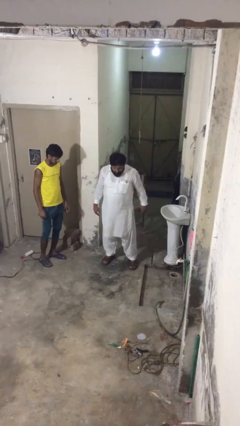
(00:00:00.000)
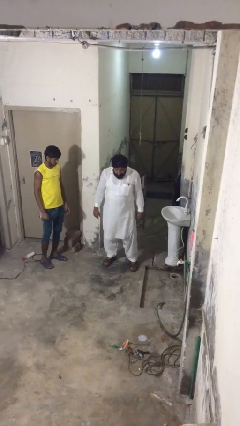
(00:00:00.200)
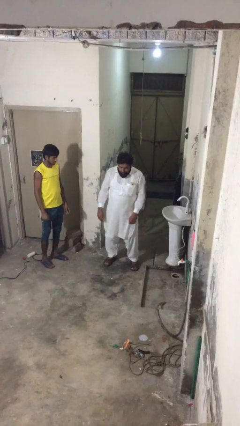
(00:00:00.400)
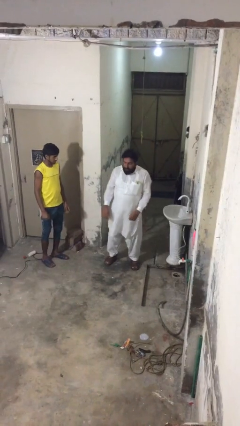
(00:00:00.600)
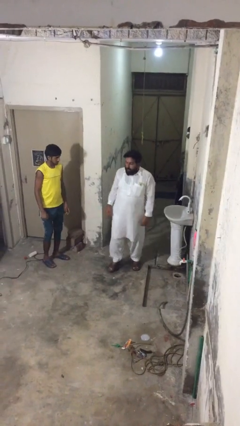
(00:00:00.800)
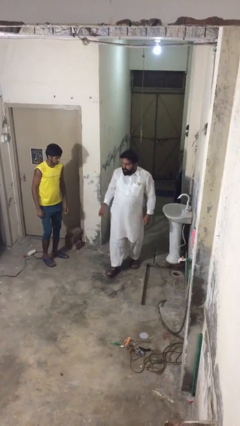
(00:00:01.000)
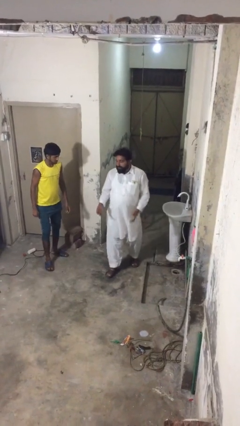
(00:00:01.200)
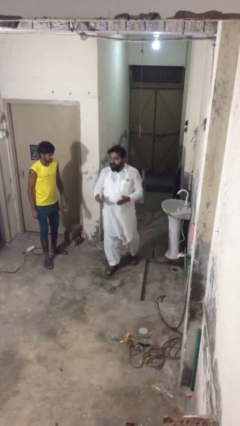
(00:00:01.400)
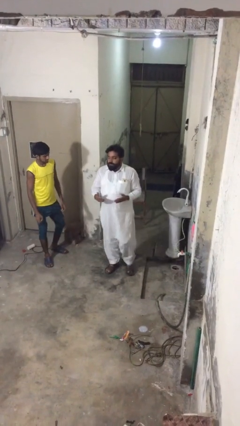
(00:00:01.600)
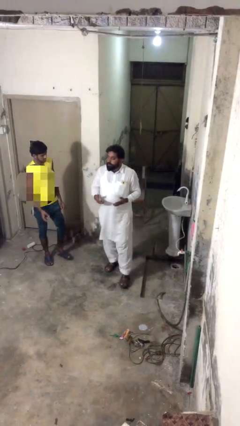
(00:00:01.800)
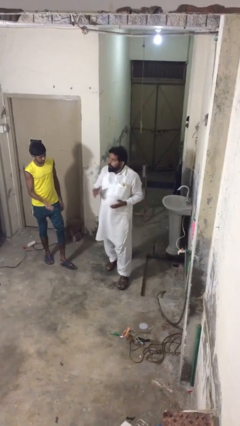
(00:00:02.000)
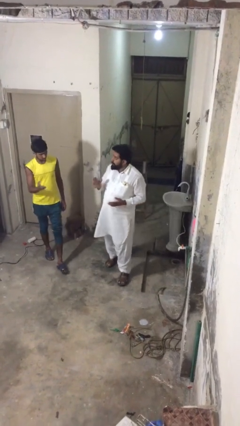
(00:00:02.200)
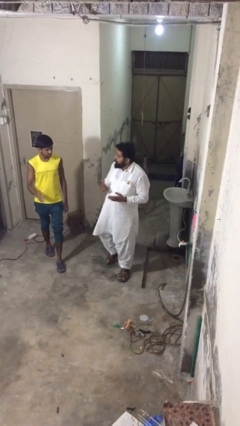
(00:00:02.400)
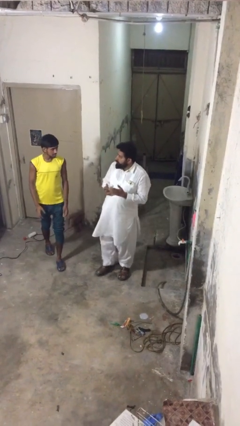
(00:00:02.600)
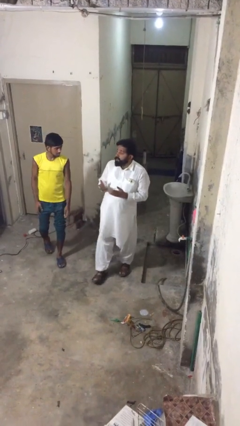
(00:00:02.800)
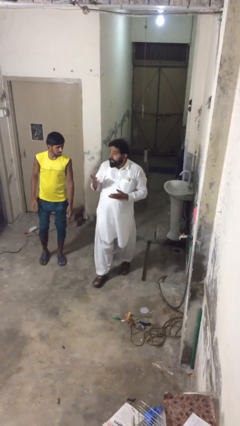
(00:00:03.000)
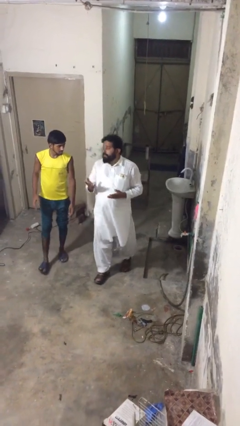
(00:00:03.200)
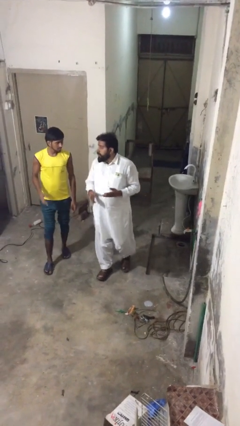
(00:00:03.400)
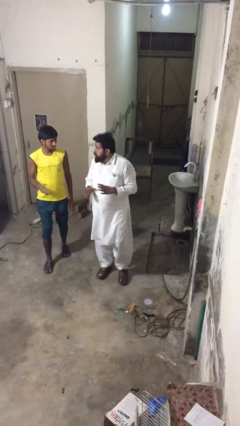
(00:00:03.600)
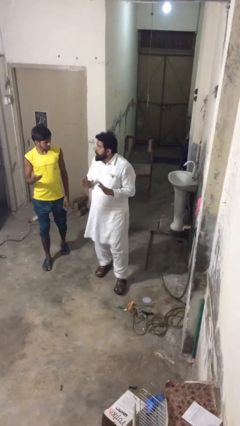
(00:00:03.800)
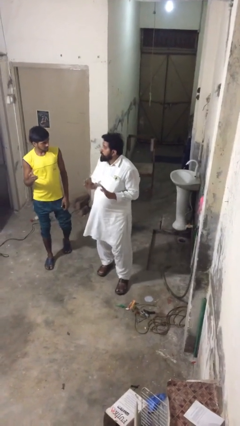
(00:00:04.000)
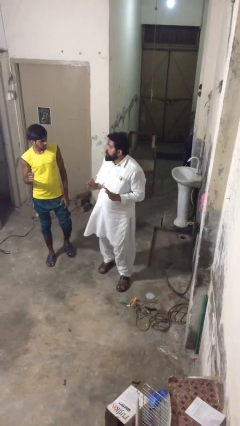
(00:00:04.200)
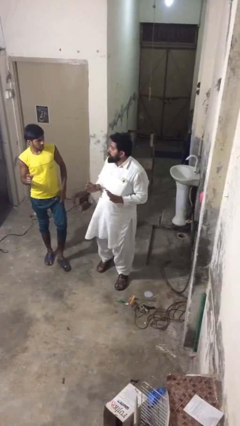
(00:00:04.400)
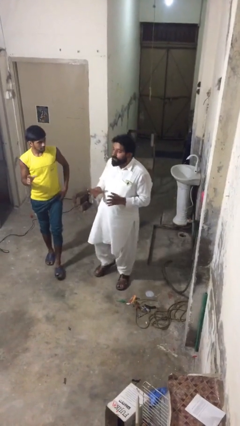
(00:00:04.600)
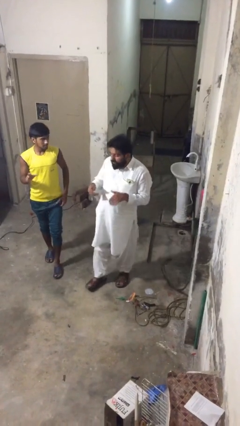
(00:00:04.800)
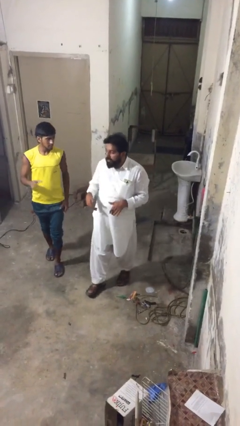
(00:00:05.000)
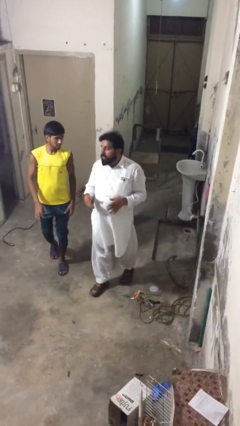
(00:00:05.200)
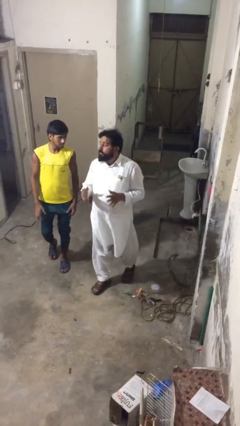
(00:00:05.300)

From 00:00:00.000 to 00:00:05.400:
person talks to person

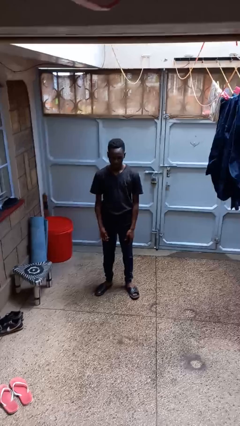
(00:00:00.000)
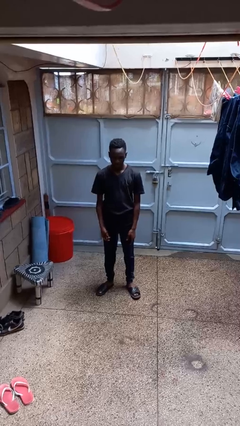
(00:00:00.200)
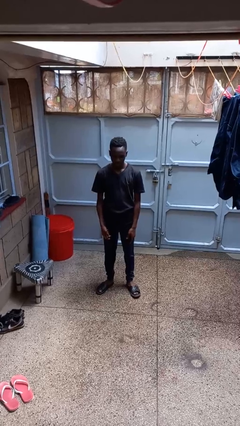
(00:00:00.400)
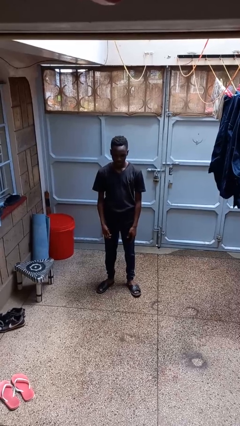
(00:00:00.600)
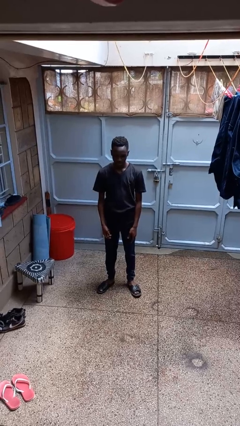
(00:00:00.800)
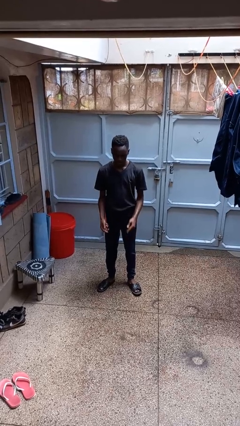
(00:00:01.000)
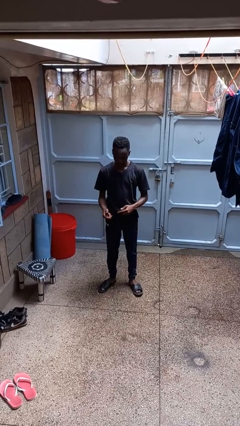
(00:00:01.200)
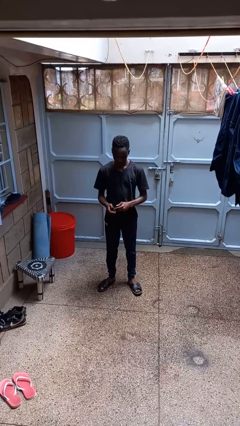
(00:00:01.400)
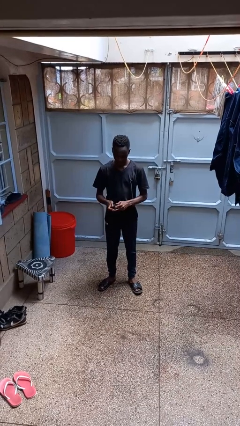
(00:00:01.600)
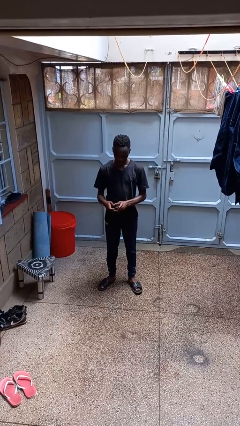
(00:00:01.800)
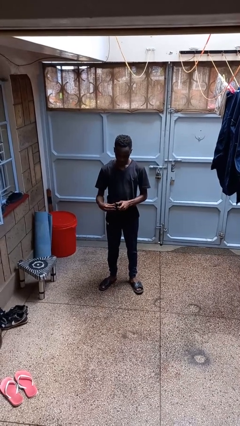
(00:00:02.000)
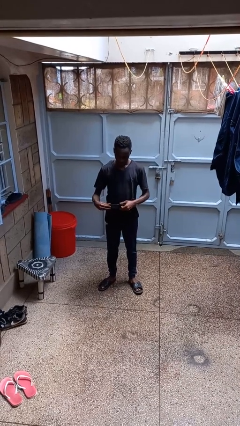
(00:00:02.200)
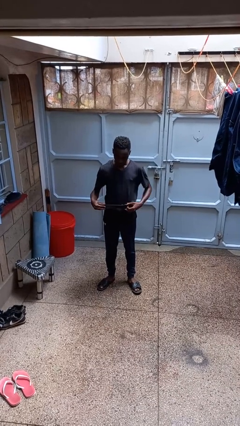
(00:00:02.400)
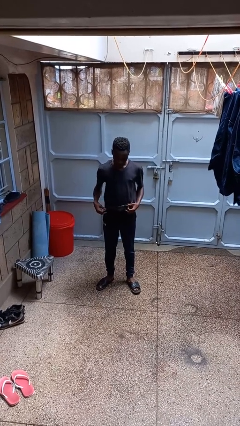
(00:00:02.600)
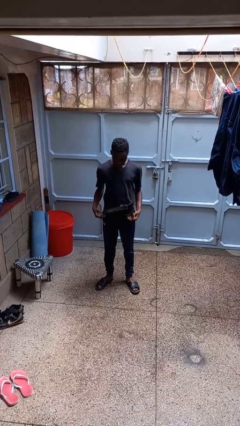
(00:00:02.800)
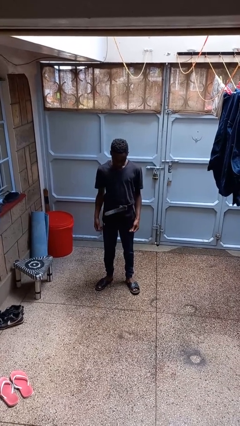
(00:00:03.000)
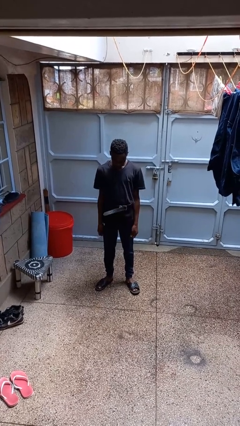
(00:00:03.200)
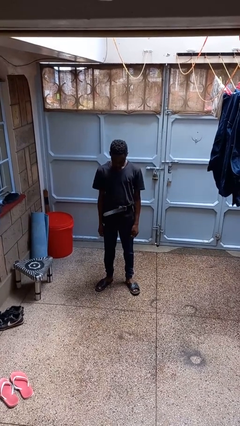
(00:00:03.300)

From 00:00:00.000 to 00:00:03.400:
person puts on belt

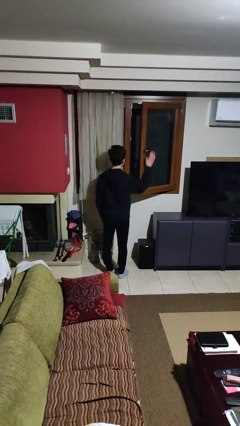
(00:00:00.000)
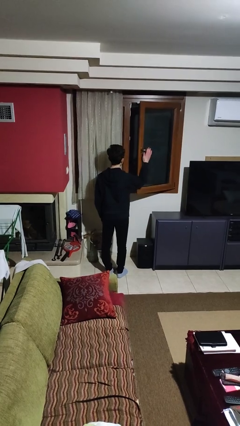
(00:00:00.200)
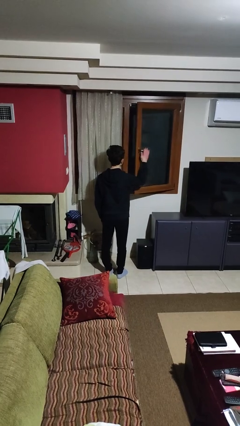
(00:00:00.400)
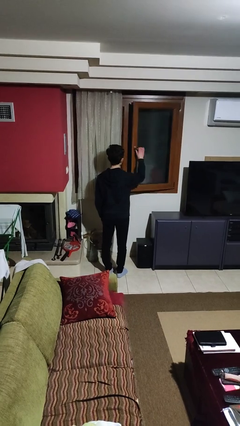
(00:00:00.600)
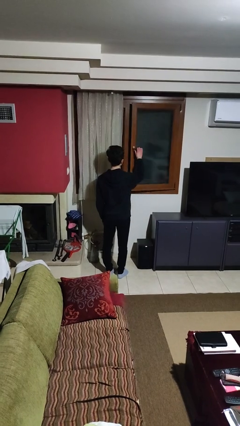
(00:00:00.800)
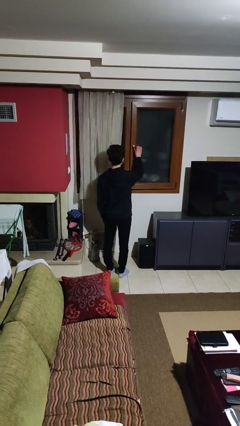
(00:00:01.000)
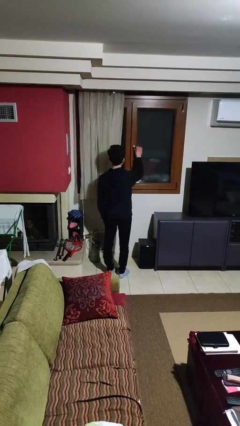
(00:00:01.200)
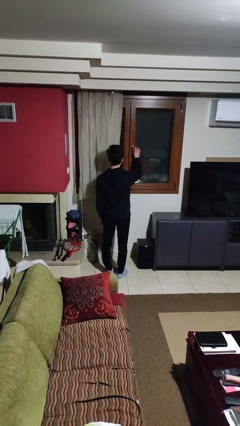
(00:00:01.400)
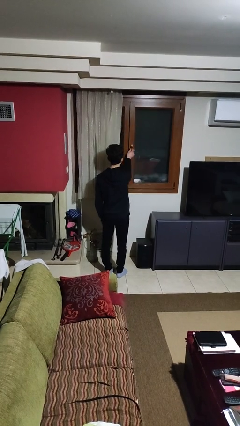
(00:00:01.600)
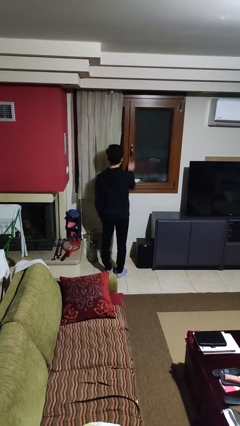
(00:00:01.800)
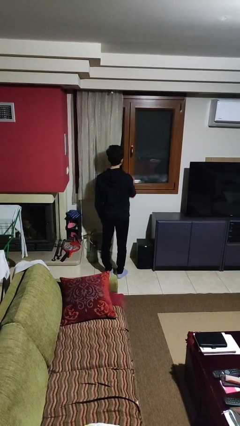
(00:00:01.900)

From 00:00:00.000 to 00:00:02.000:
person closes home window

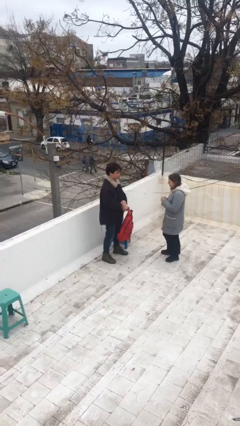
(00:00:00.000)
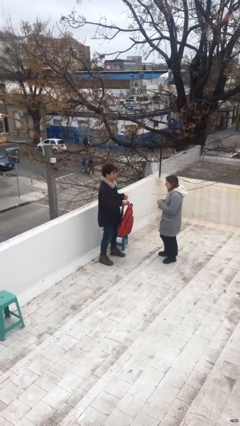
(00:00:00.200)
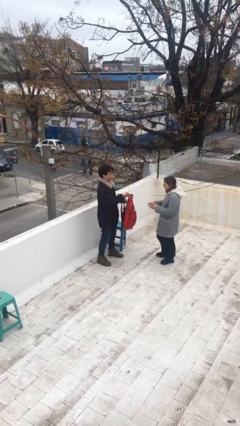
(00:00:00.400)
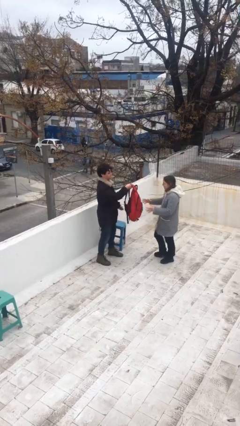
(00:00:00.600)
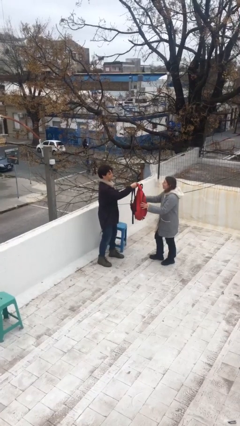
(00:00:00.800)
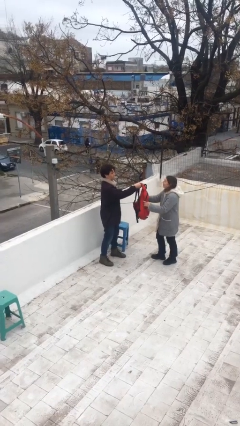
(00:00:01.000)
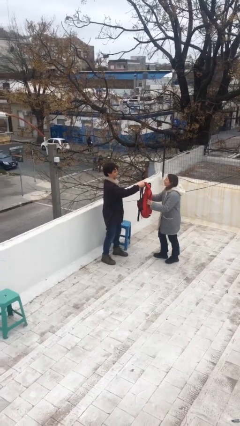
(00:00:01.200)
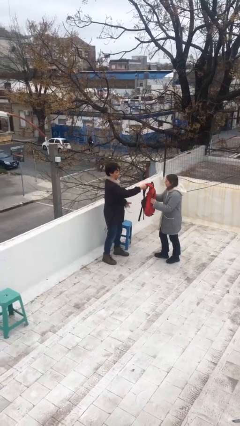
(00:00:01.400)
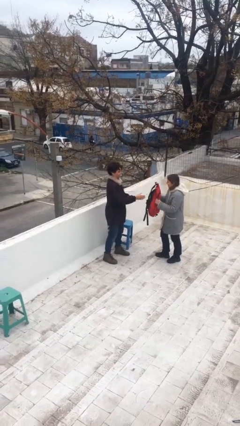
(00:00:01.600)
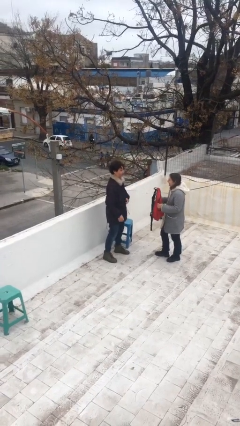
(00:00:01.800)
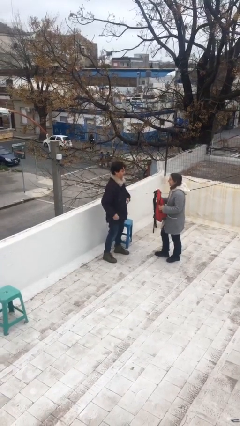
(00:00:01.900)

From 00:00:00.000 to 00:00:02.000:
person transfers object to person

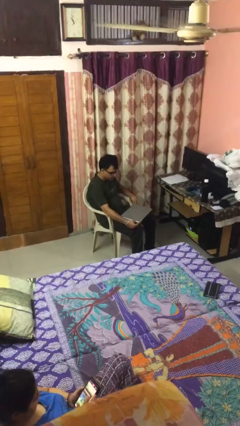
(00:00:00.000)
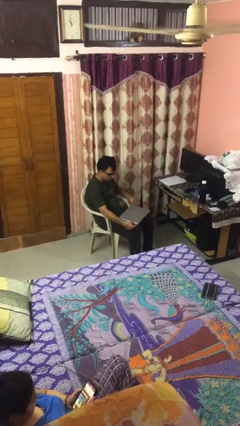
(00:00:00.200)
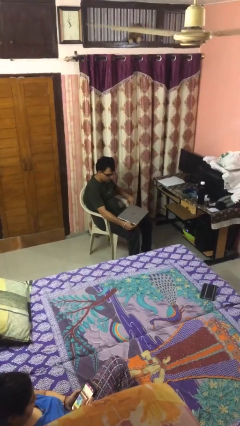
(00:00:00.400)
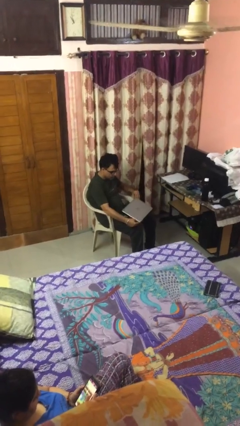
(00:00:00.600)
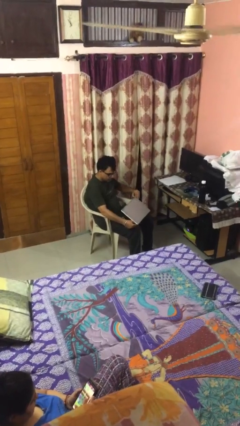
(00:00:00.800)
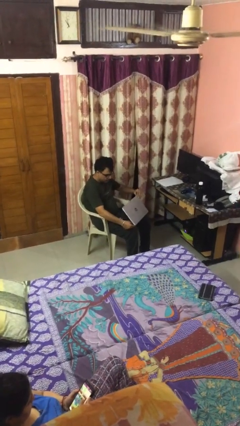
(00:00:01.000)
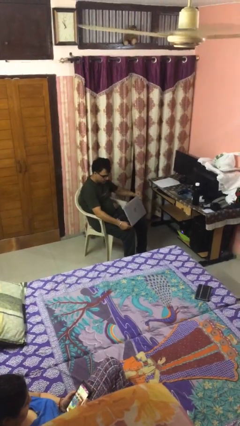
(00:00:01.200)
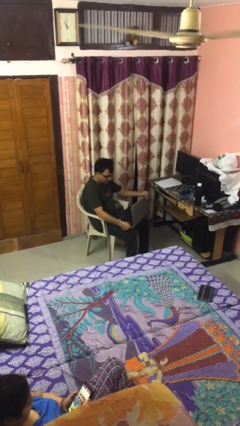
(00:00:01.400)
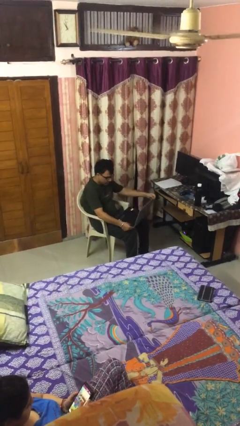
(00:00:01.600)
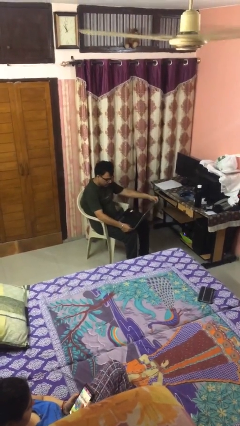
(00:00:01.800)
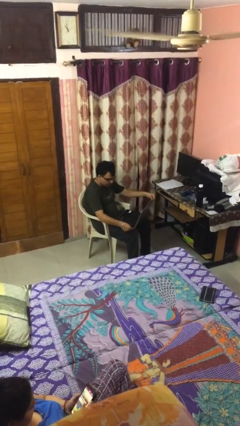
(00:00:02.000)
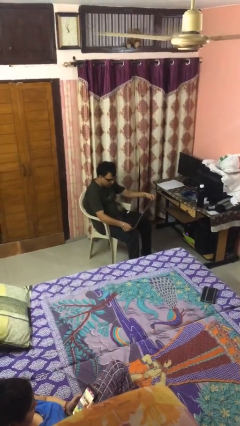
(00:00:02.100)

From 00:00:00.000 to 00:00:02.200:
person opens laptop

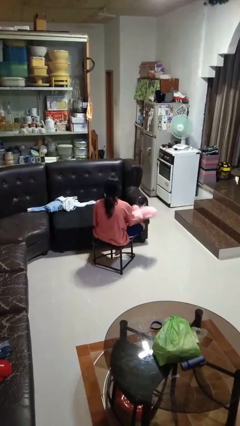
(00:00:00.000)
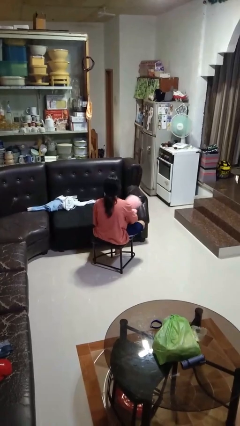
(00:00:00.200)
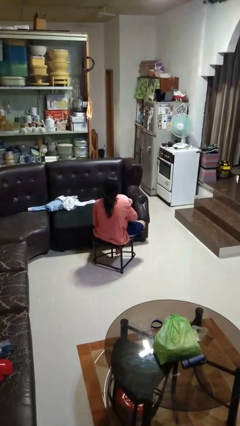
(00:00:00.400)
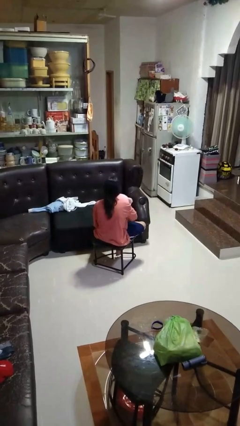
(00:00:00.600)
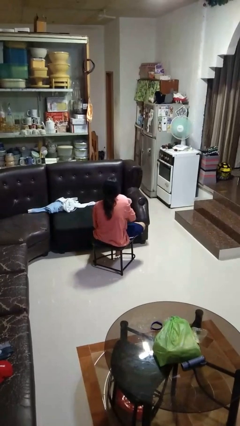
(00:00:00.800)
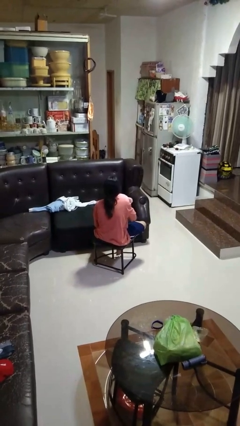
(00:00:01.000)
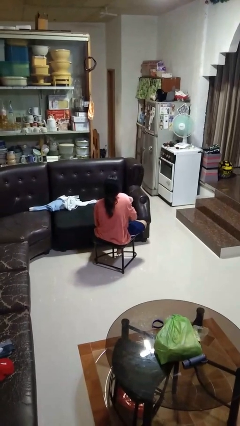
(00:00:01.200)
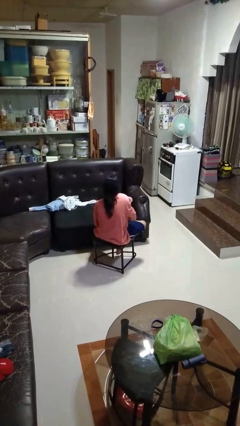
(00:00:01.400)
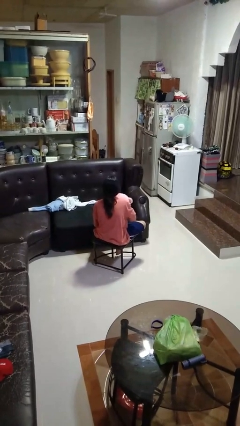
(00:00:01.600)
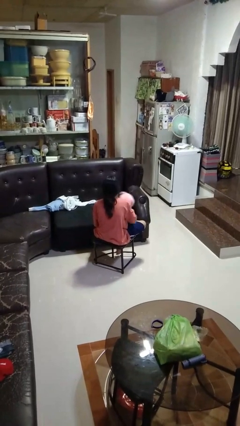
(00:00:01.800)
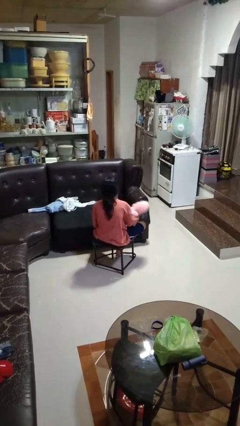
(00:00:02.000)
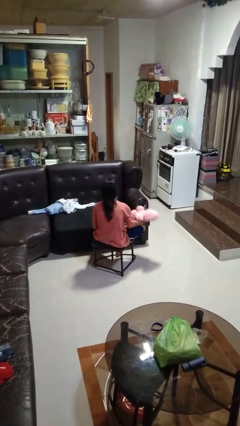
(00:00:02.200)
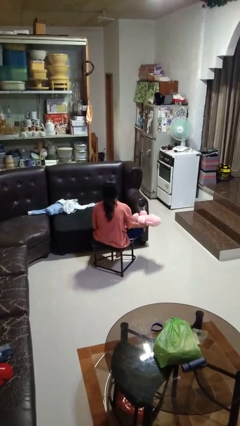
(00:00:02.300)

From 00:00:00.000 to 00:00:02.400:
person hugs stuffed animal
